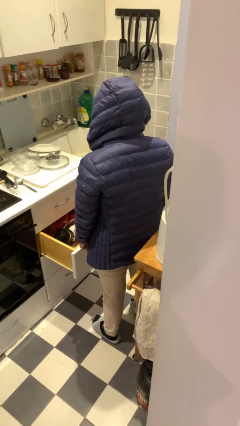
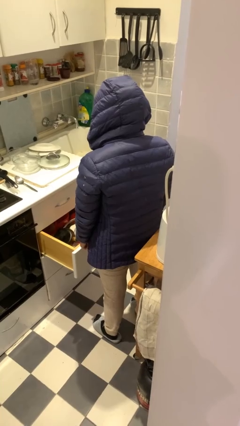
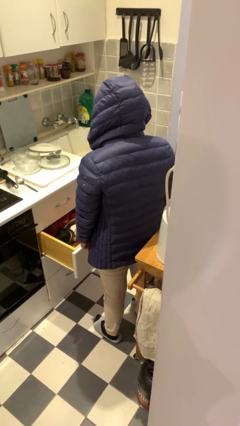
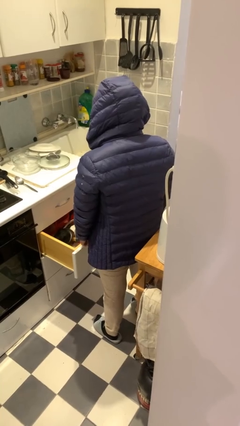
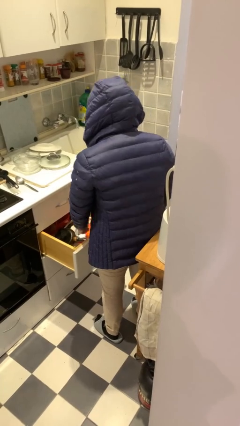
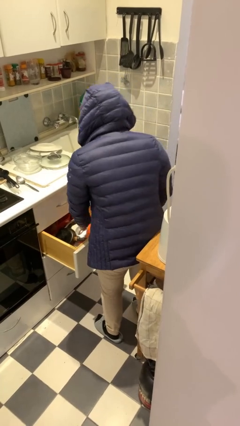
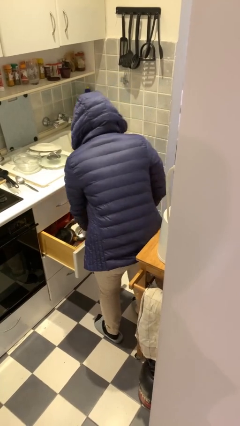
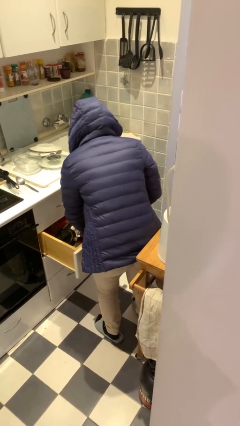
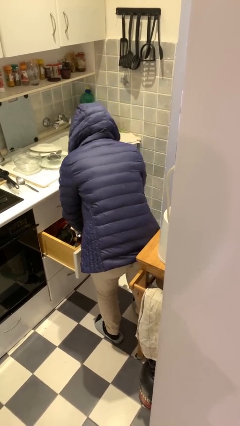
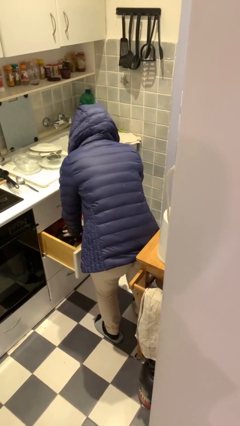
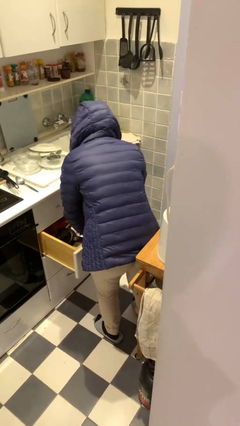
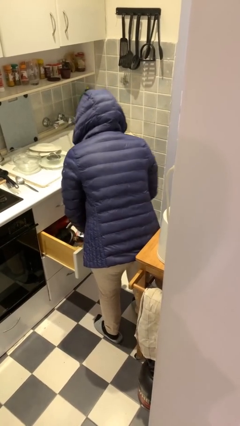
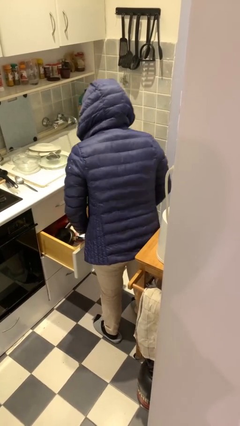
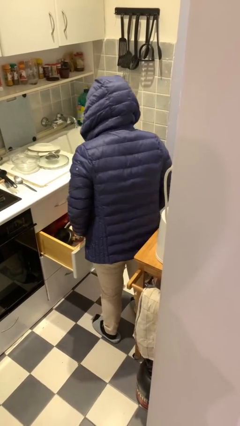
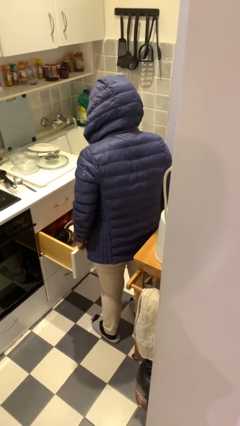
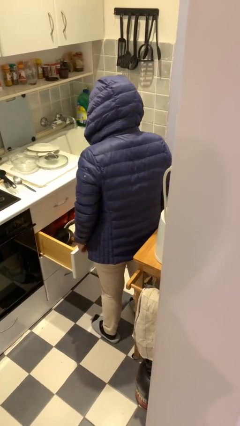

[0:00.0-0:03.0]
person searches in kitchen drawer

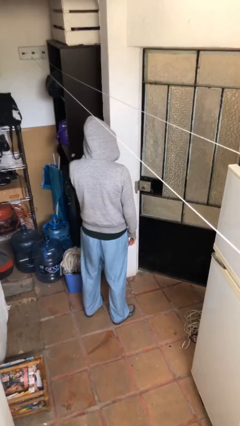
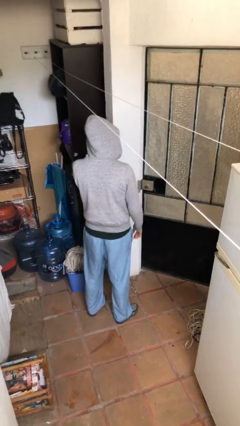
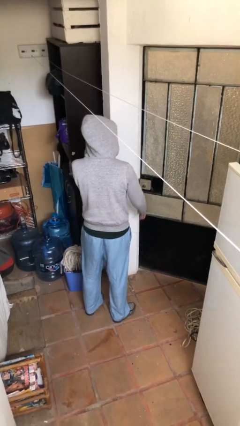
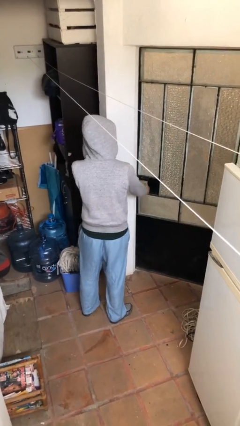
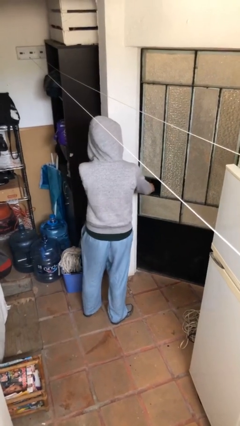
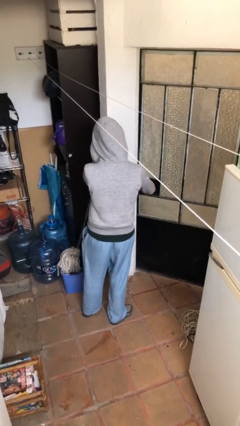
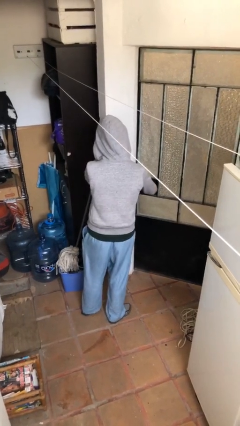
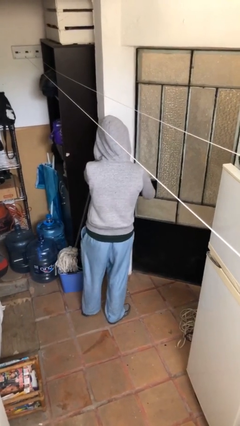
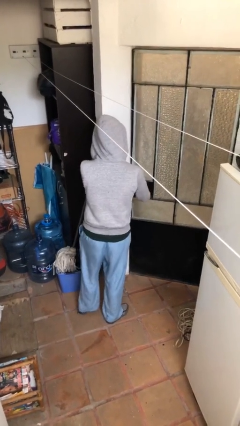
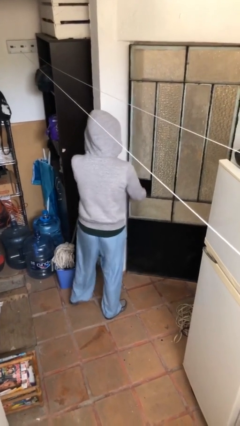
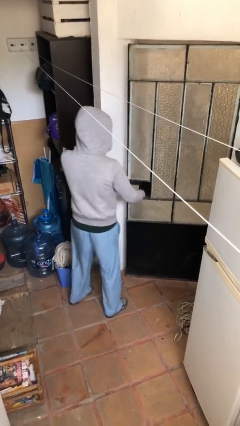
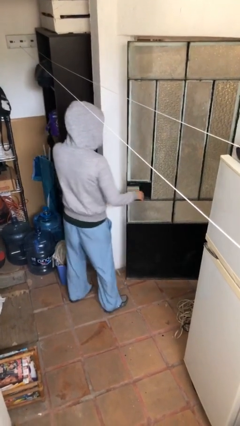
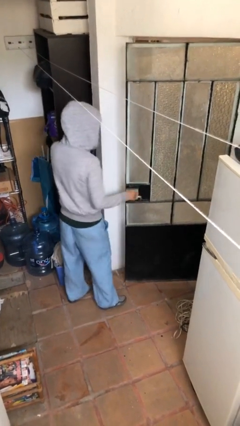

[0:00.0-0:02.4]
person opens facility door

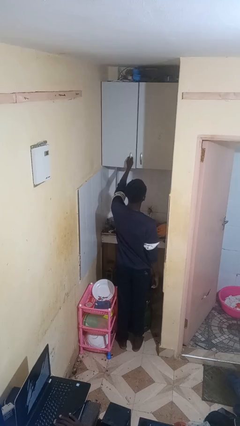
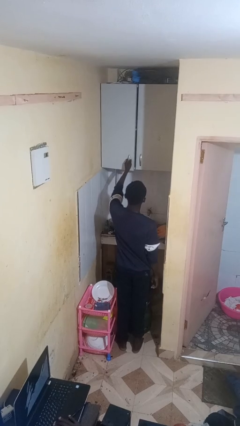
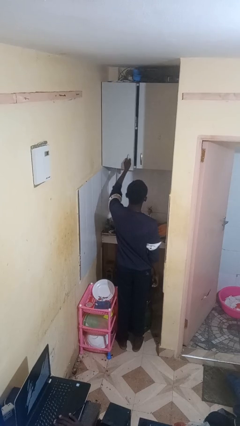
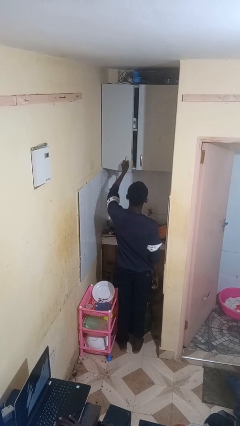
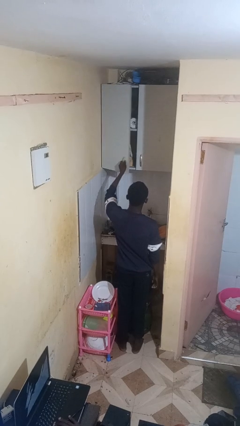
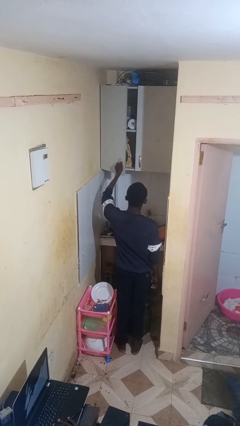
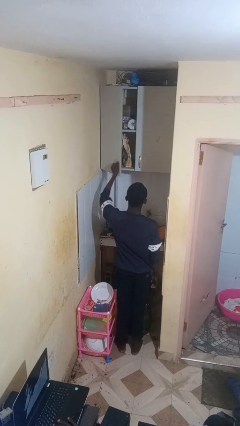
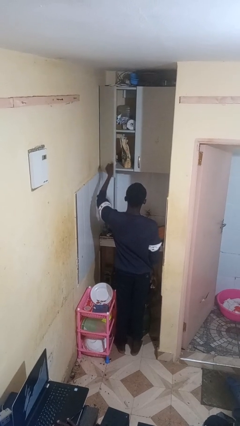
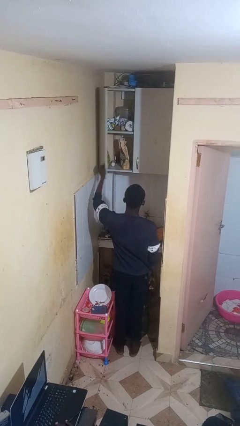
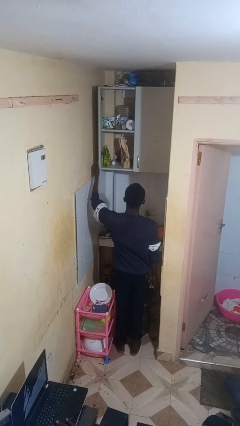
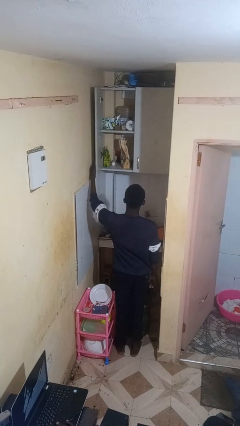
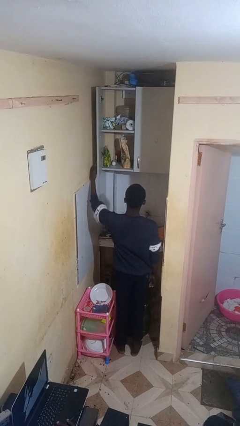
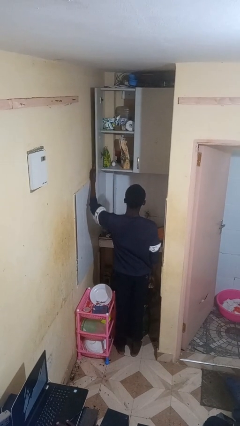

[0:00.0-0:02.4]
person opens cabinet

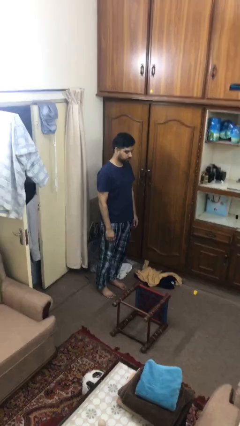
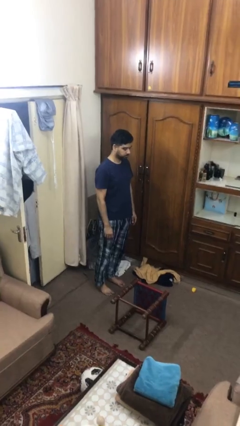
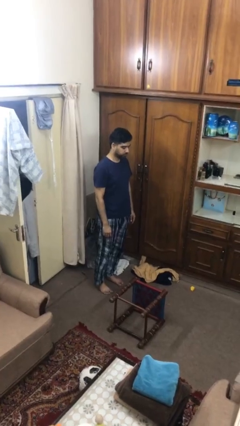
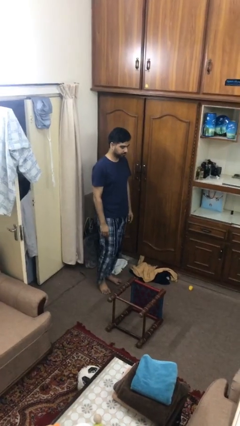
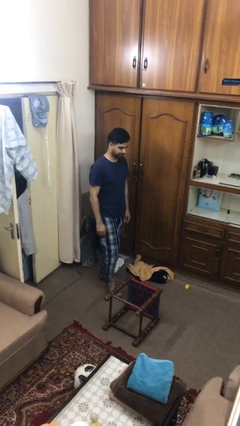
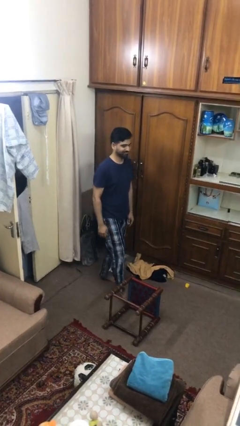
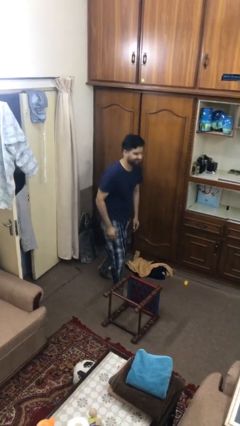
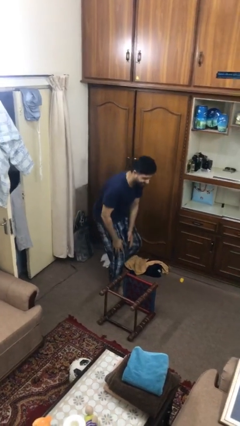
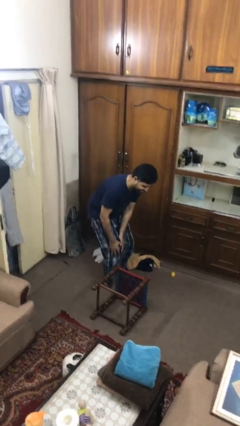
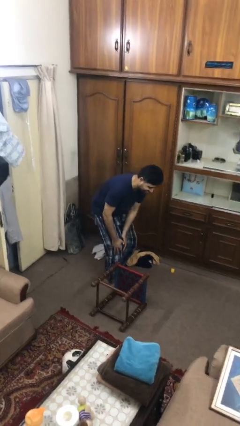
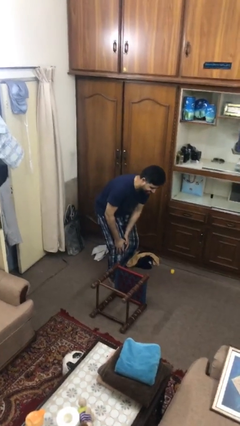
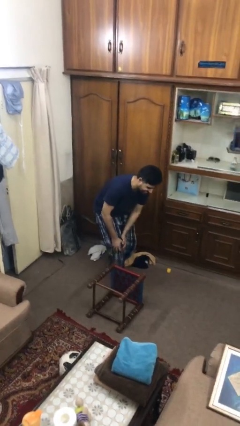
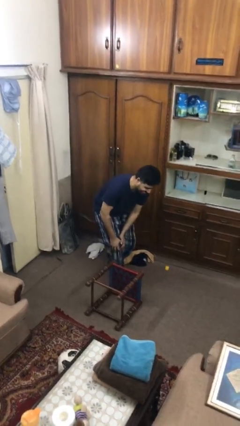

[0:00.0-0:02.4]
person trips on object on floor

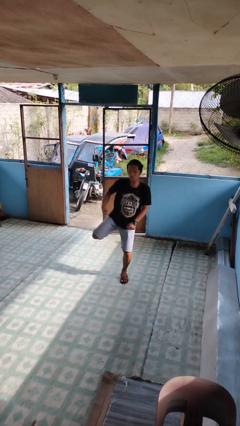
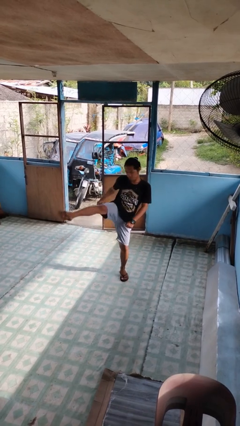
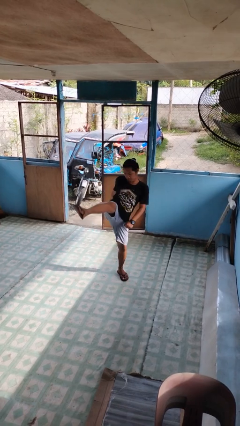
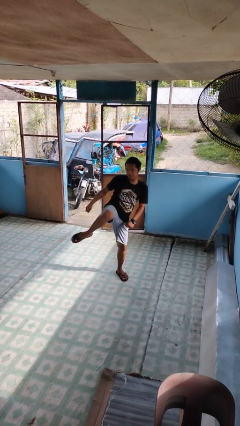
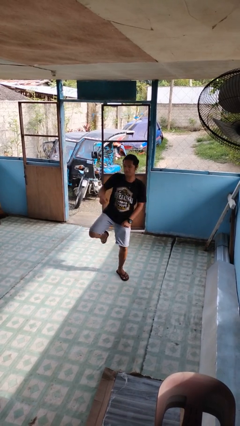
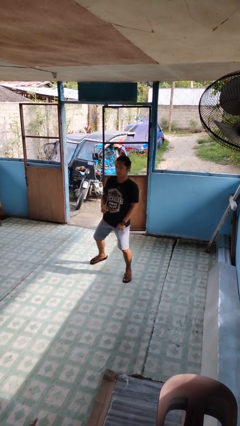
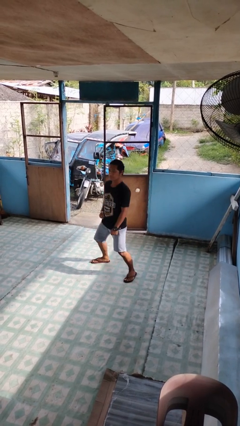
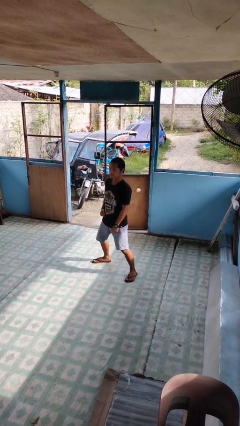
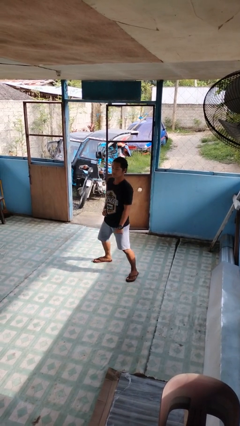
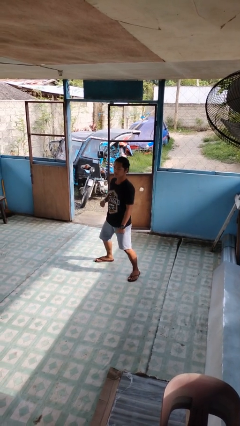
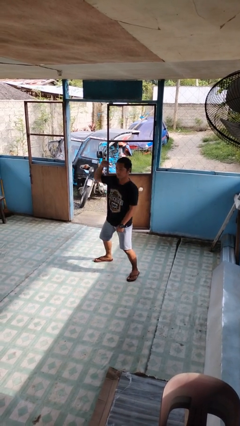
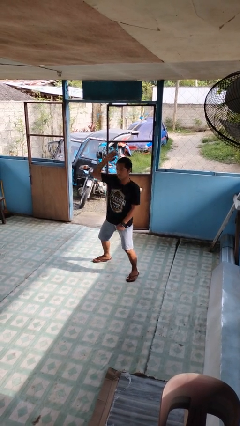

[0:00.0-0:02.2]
person karate kicks

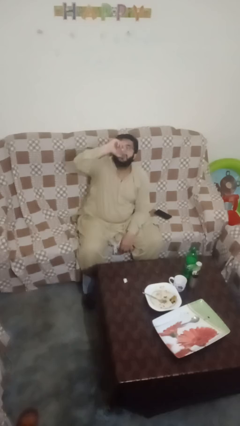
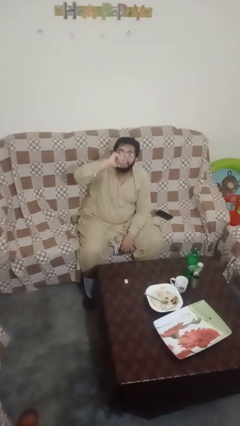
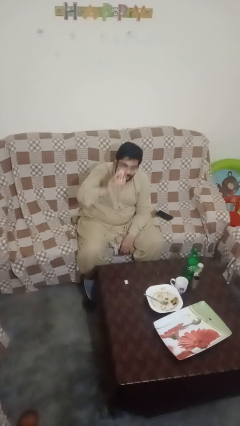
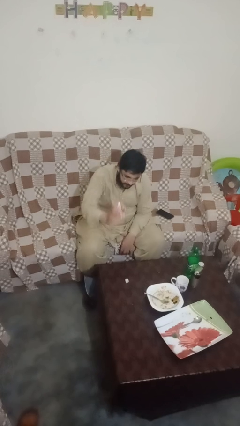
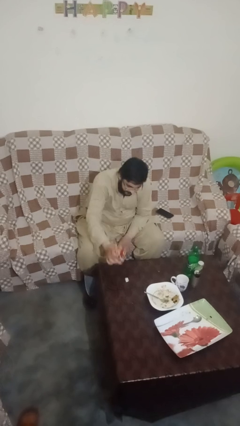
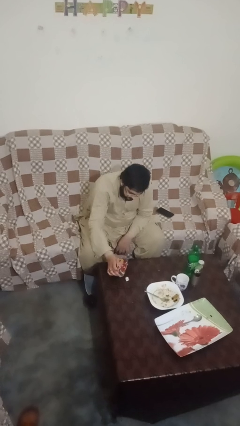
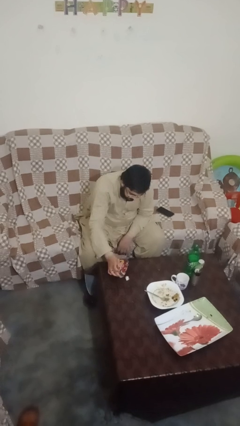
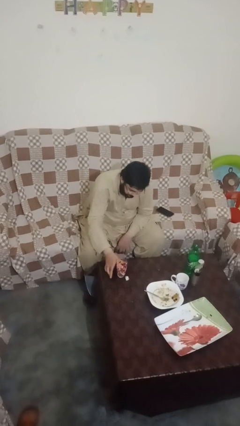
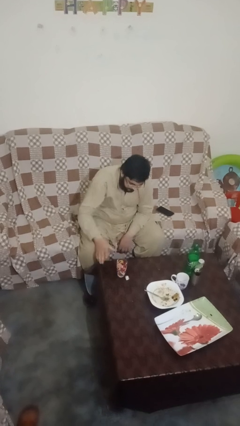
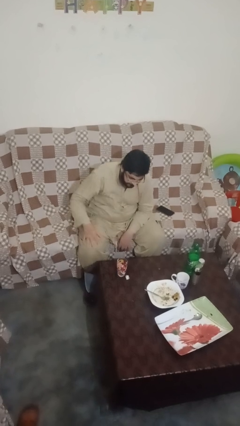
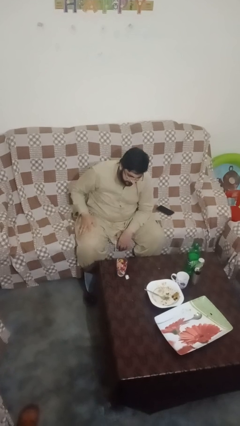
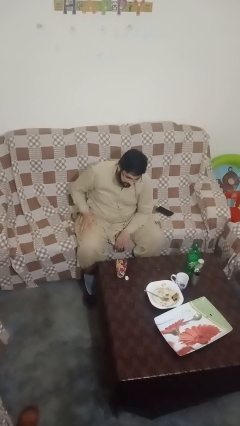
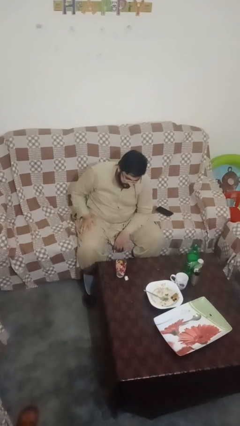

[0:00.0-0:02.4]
person puts down object on table

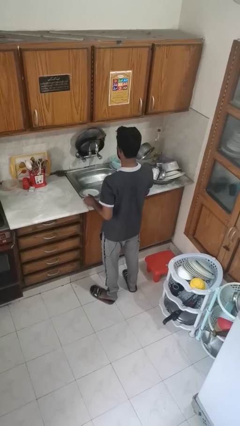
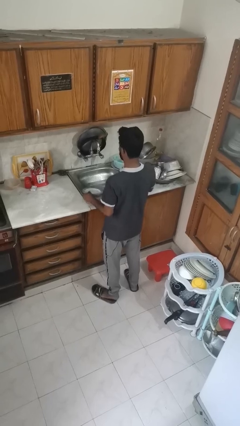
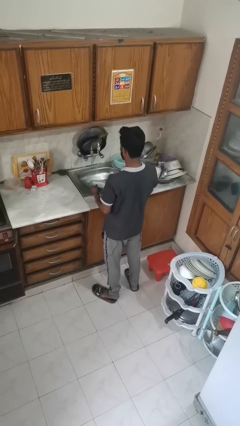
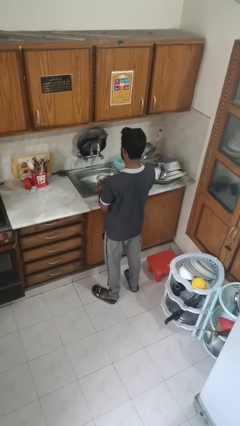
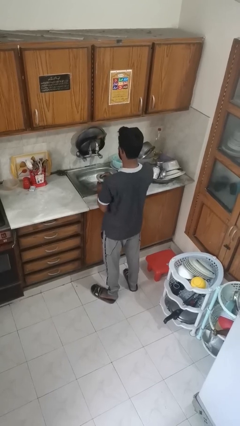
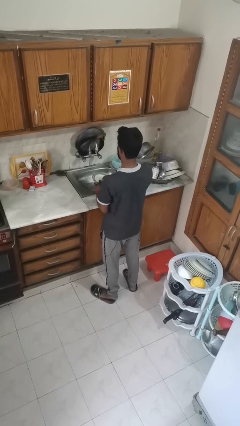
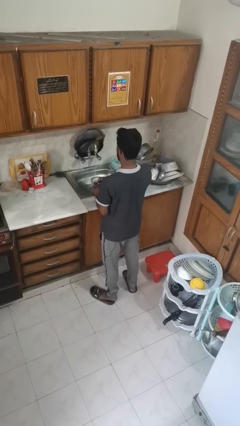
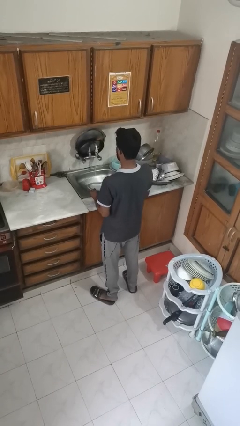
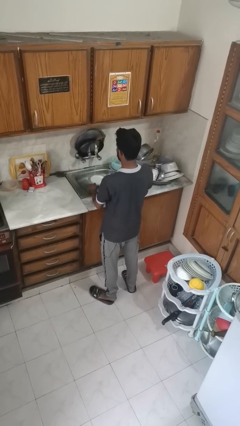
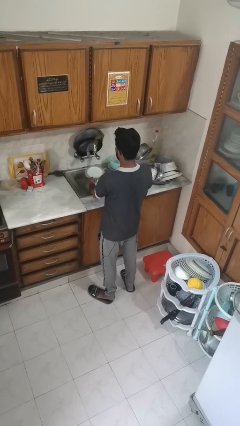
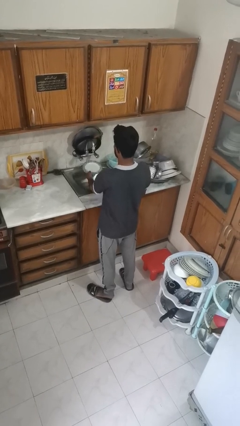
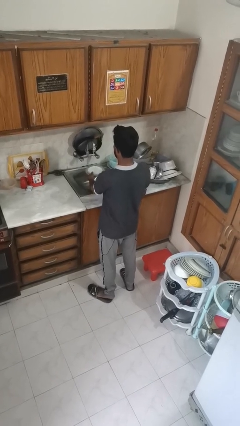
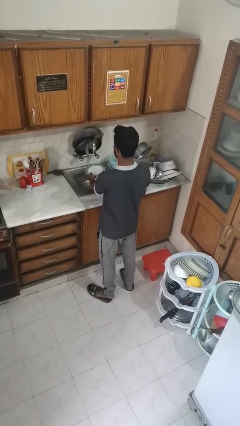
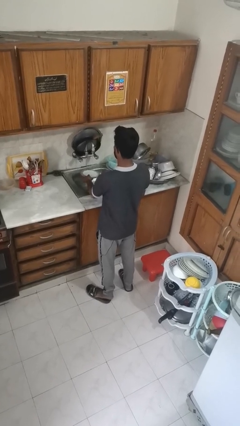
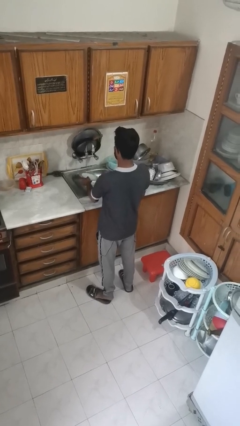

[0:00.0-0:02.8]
person washes dish
